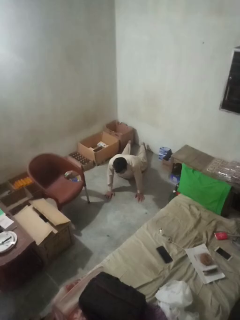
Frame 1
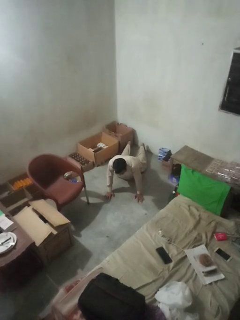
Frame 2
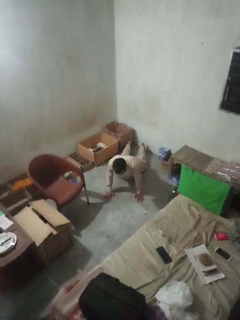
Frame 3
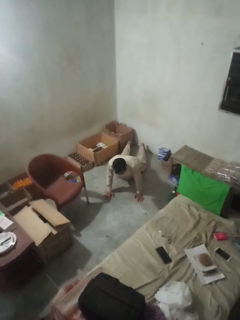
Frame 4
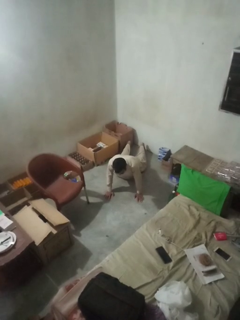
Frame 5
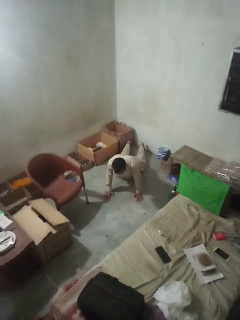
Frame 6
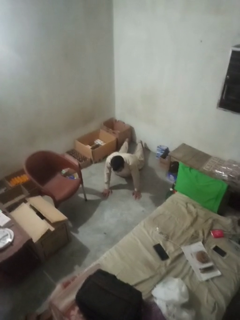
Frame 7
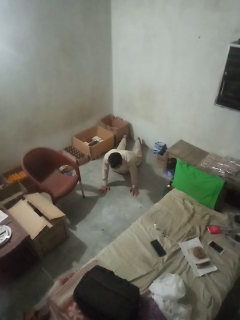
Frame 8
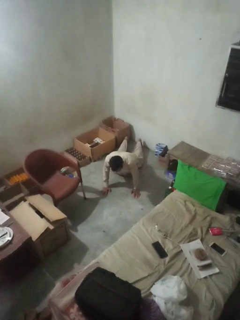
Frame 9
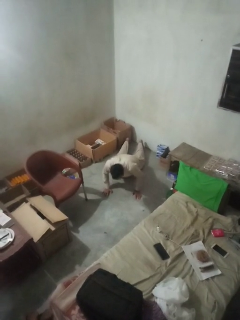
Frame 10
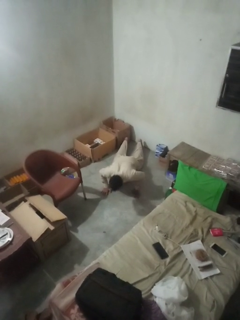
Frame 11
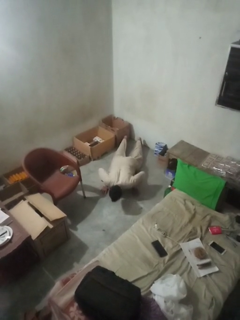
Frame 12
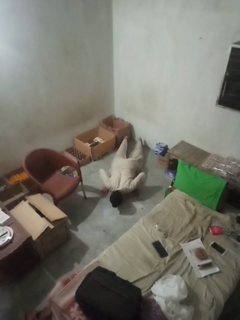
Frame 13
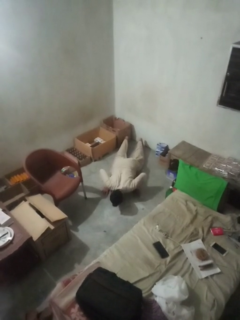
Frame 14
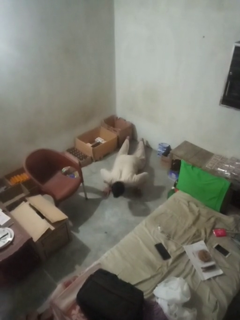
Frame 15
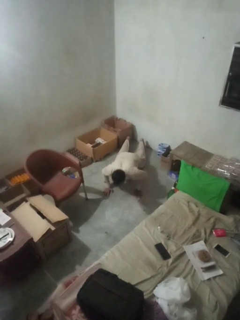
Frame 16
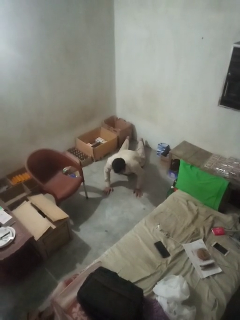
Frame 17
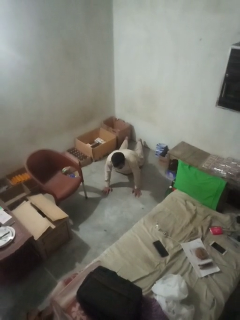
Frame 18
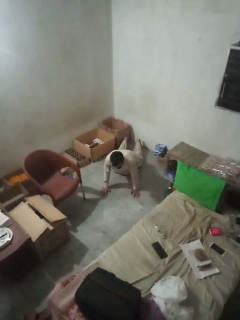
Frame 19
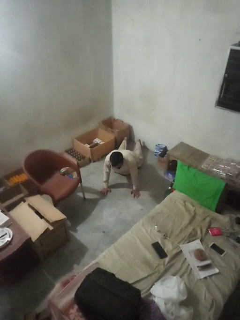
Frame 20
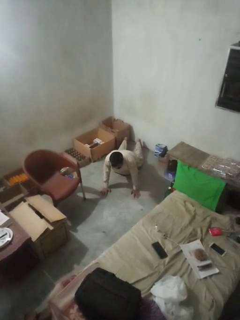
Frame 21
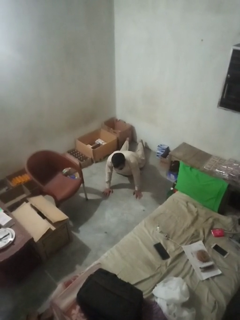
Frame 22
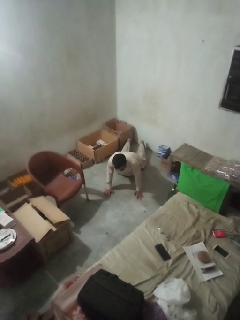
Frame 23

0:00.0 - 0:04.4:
person exercises with pushup

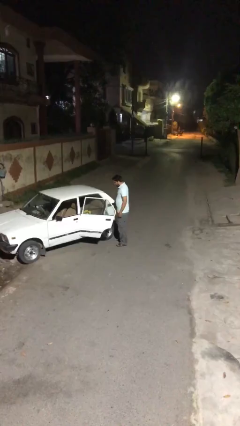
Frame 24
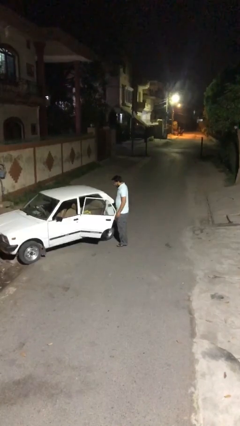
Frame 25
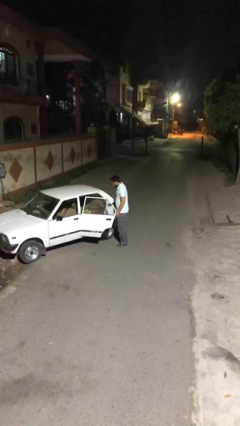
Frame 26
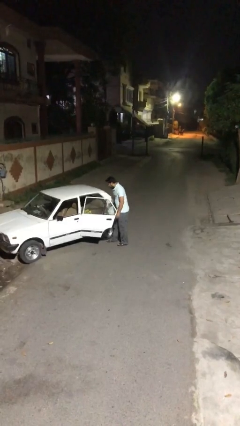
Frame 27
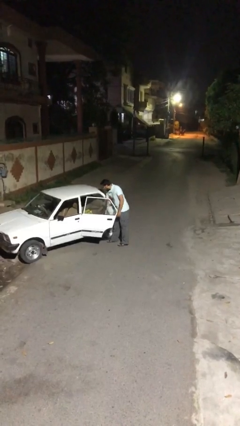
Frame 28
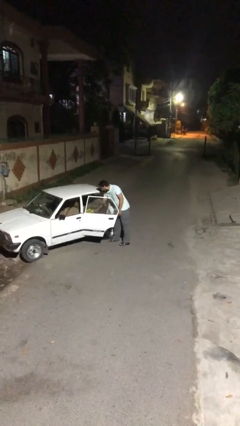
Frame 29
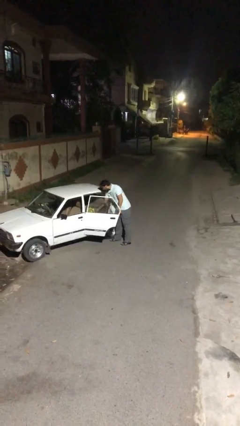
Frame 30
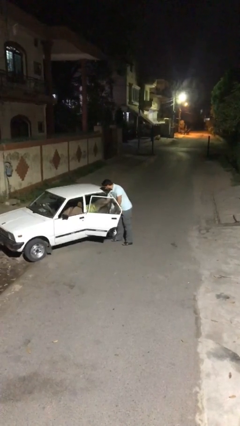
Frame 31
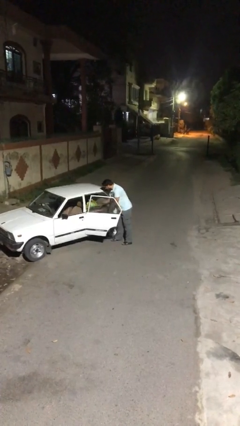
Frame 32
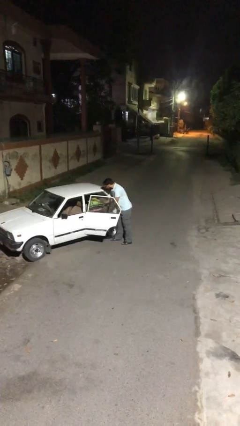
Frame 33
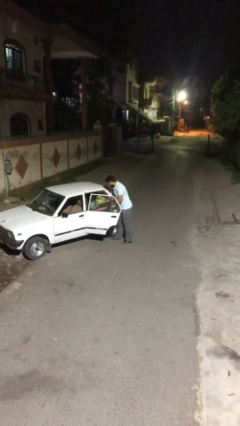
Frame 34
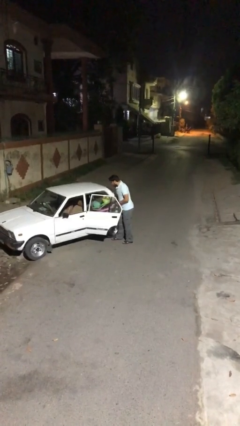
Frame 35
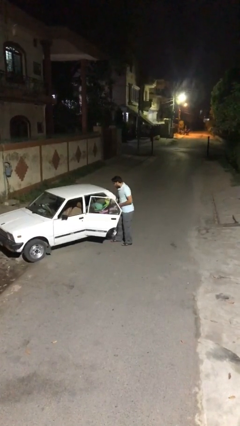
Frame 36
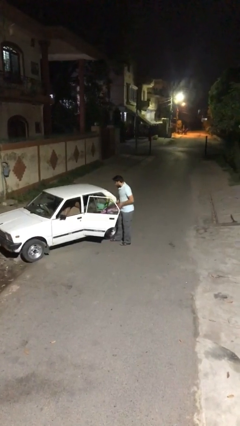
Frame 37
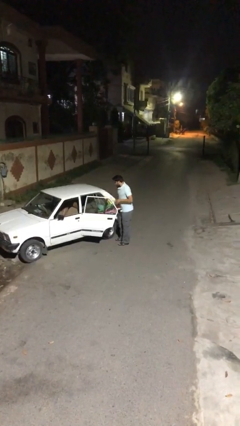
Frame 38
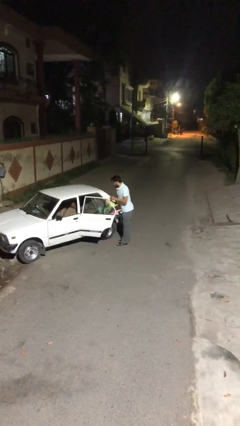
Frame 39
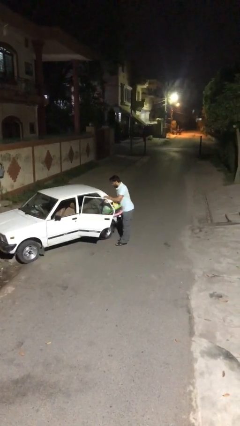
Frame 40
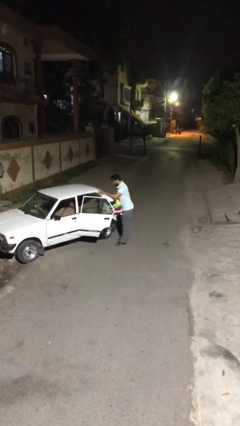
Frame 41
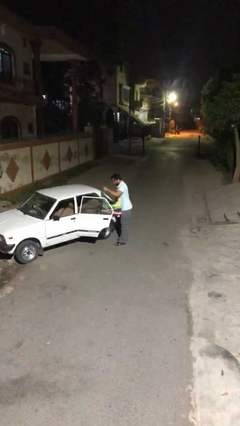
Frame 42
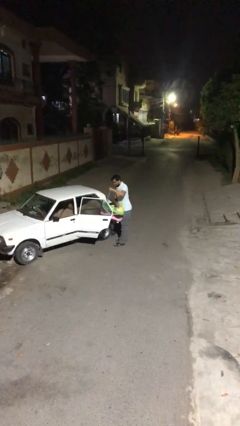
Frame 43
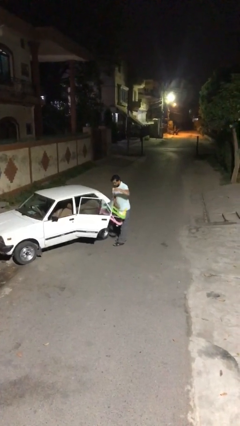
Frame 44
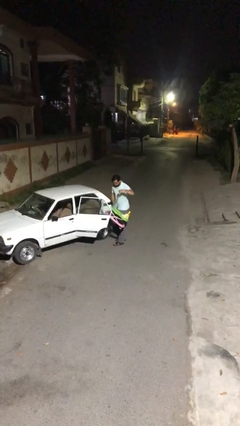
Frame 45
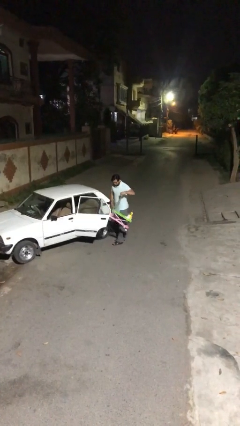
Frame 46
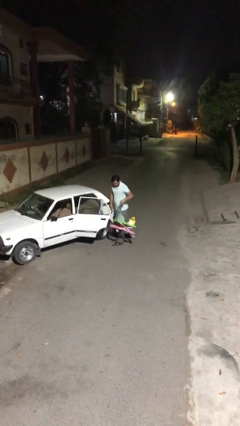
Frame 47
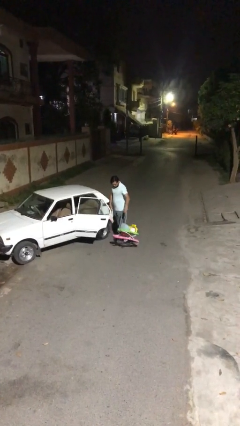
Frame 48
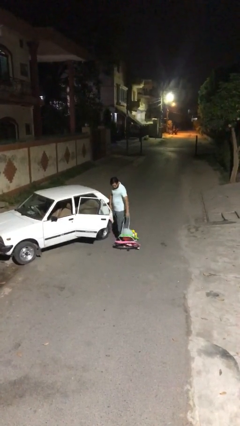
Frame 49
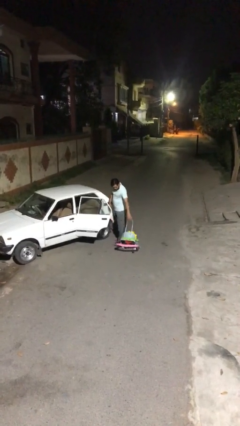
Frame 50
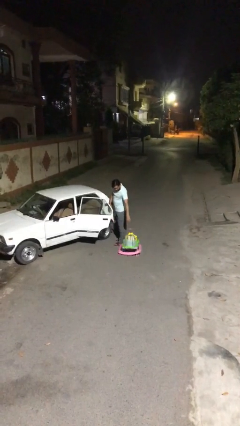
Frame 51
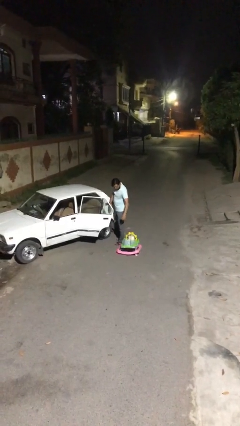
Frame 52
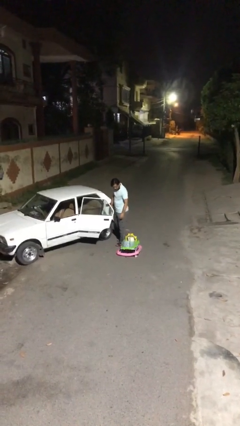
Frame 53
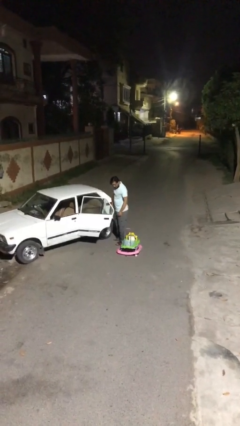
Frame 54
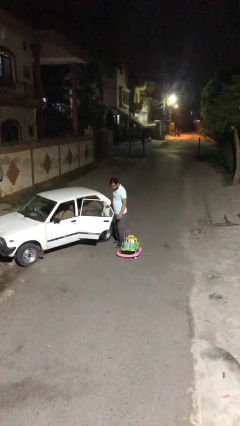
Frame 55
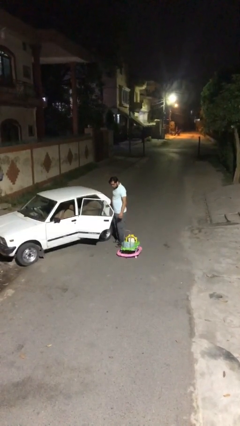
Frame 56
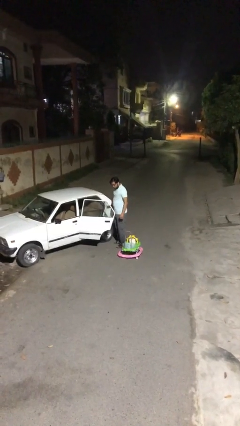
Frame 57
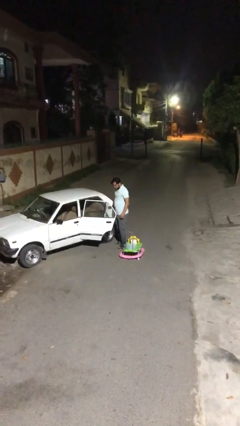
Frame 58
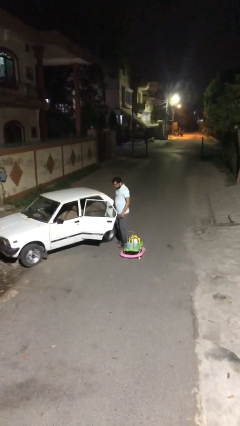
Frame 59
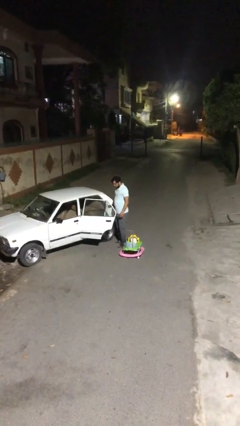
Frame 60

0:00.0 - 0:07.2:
person unloads car

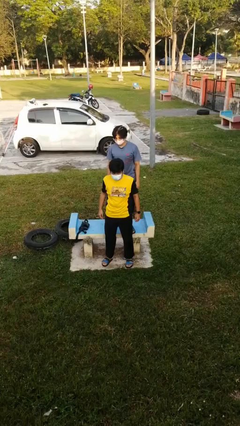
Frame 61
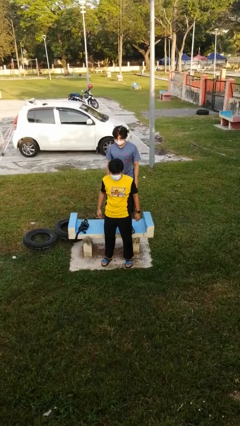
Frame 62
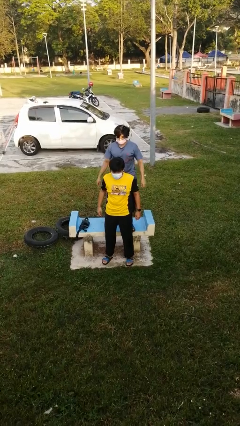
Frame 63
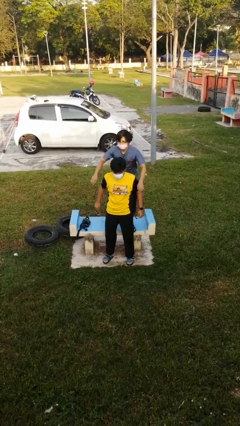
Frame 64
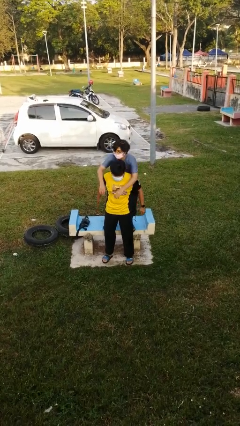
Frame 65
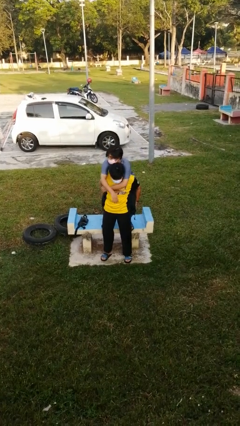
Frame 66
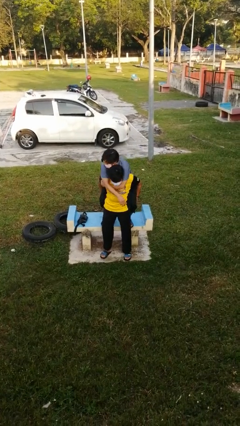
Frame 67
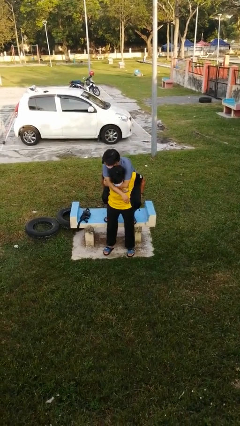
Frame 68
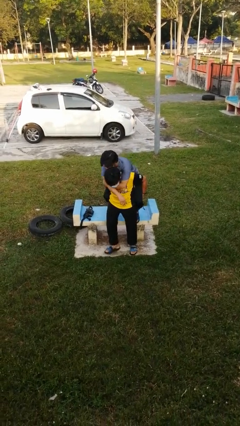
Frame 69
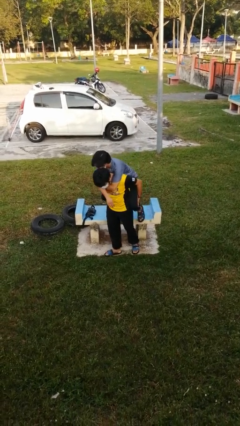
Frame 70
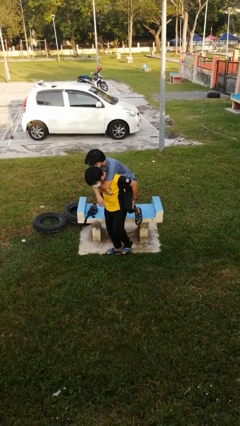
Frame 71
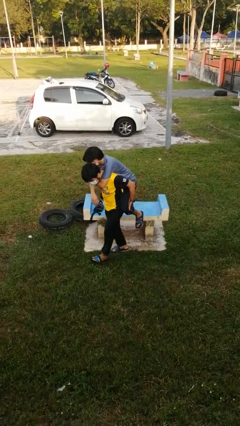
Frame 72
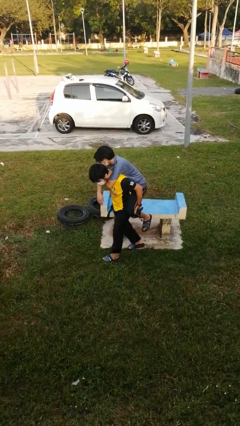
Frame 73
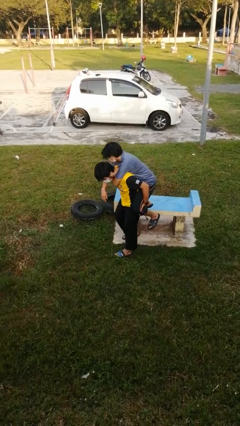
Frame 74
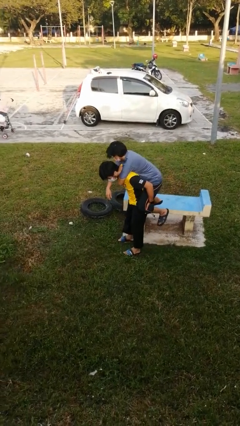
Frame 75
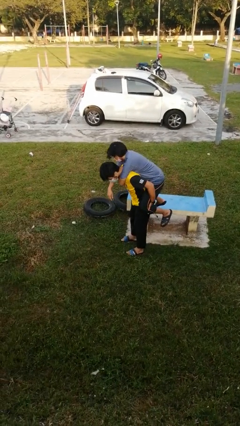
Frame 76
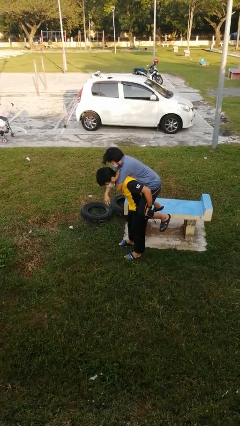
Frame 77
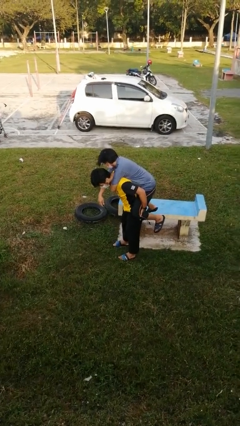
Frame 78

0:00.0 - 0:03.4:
person carries person over shoulder

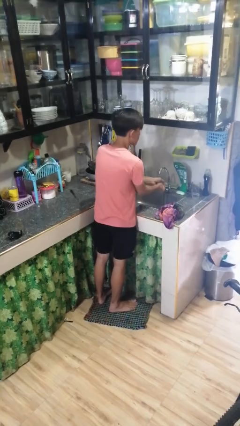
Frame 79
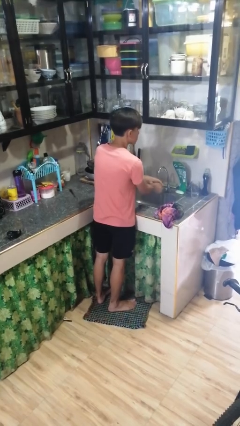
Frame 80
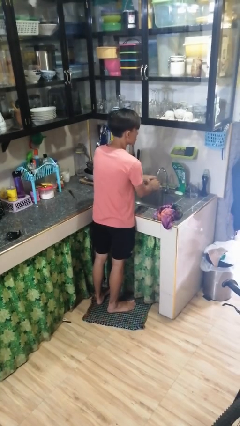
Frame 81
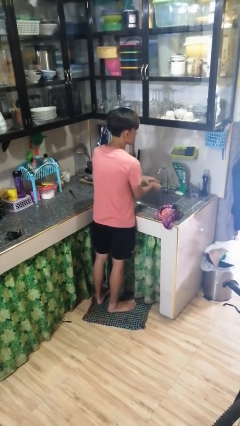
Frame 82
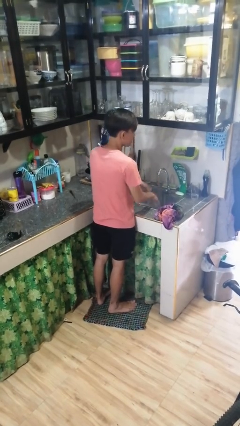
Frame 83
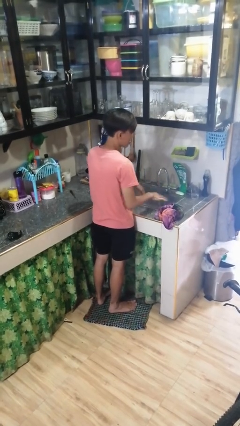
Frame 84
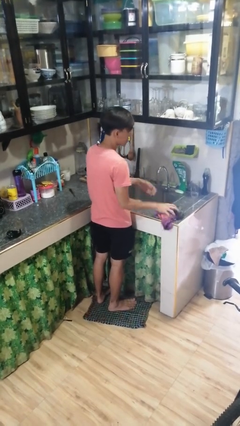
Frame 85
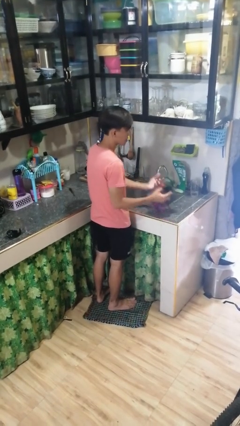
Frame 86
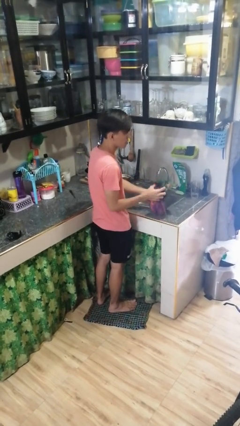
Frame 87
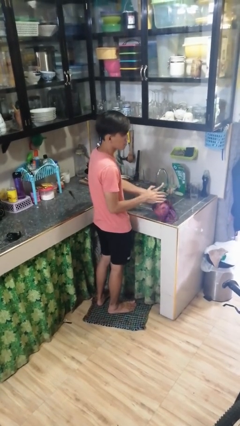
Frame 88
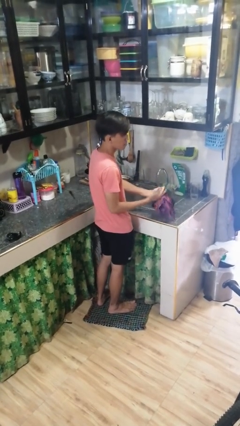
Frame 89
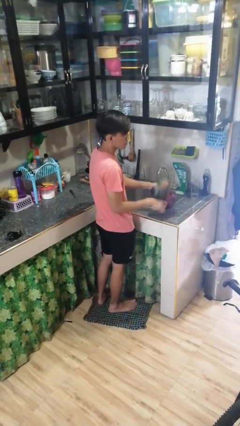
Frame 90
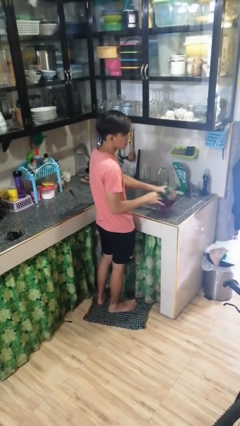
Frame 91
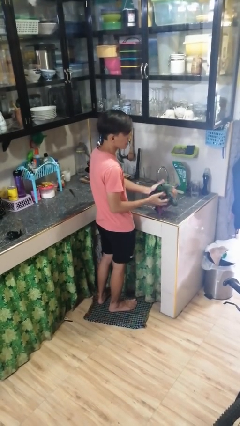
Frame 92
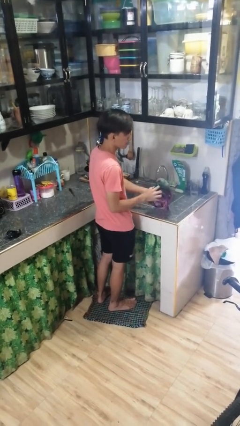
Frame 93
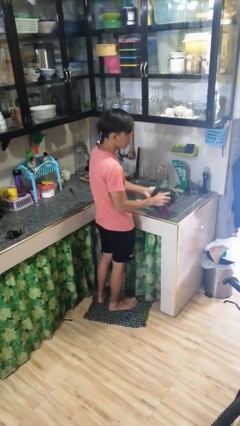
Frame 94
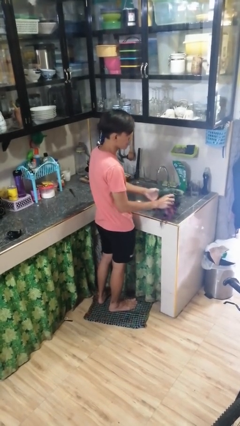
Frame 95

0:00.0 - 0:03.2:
person dries hands with towel

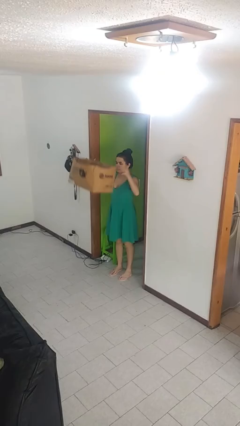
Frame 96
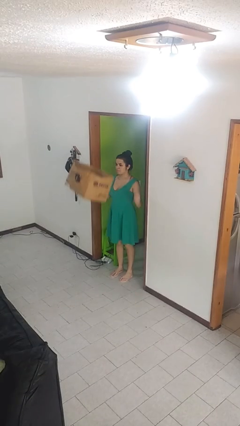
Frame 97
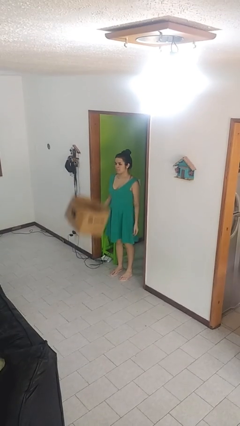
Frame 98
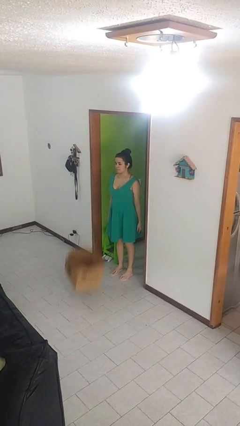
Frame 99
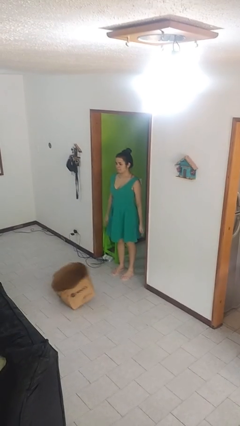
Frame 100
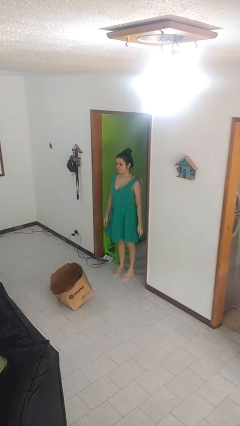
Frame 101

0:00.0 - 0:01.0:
person throws object into air
